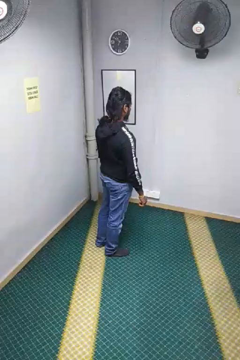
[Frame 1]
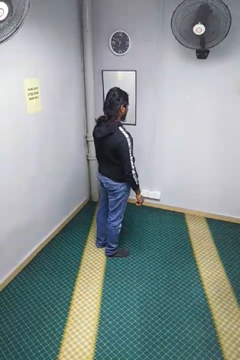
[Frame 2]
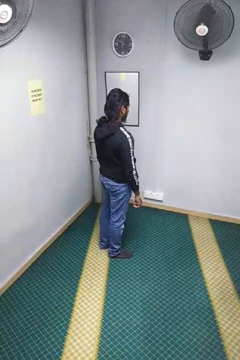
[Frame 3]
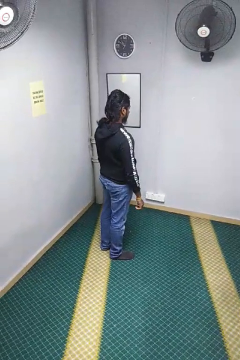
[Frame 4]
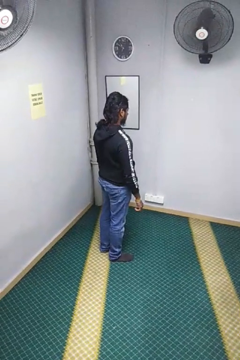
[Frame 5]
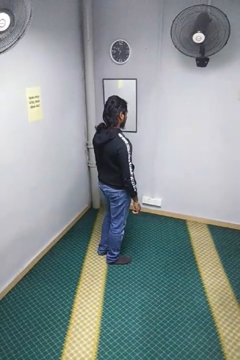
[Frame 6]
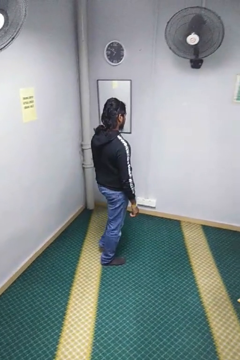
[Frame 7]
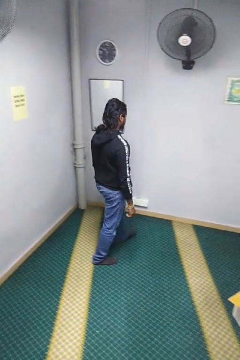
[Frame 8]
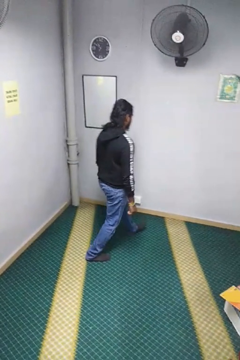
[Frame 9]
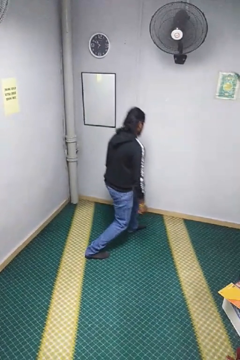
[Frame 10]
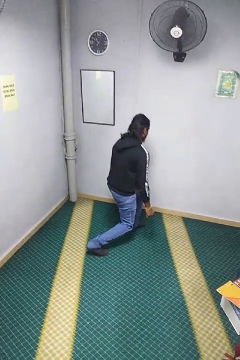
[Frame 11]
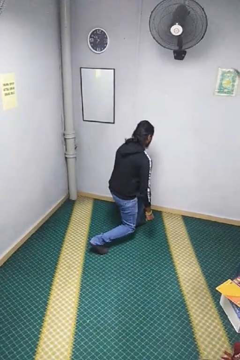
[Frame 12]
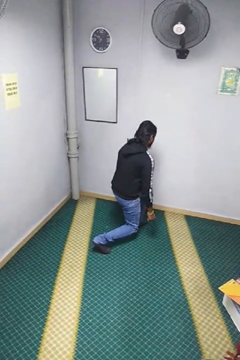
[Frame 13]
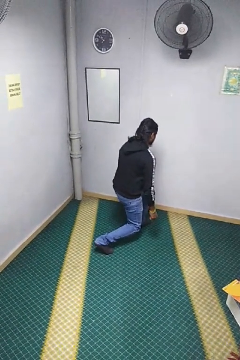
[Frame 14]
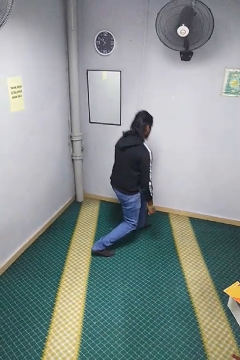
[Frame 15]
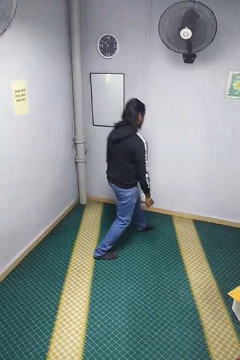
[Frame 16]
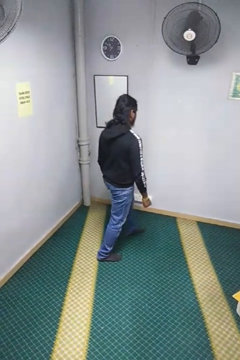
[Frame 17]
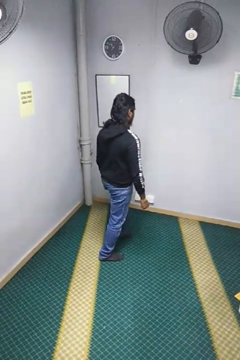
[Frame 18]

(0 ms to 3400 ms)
person exercises with lunges

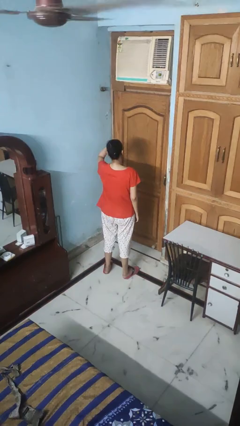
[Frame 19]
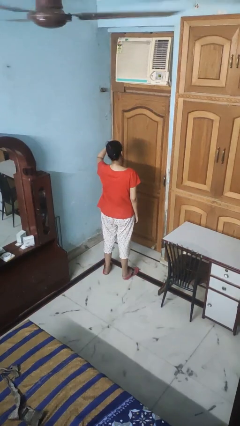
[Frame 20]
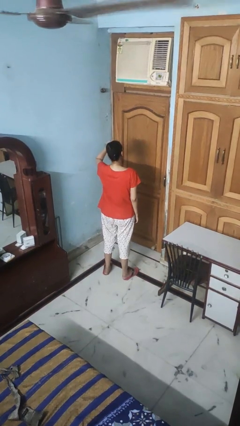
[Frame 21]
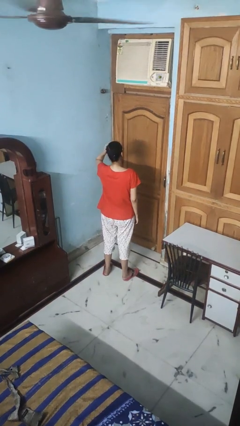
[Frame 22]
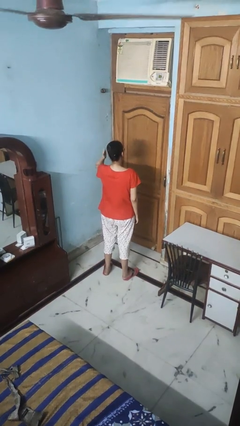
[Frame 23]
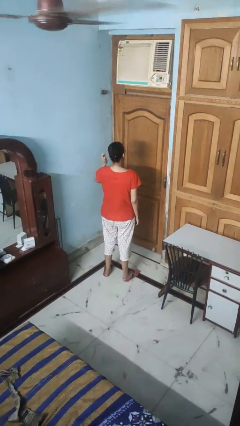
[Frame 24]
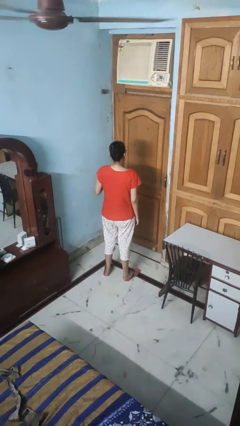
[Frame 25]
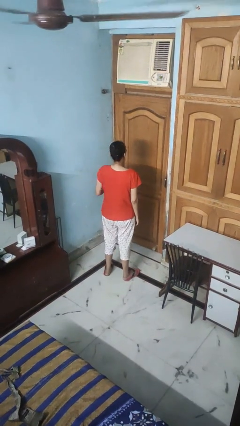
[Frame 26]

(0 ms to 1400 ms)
person strokes hair

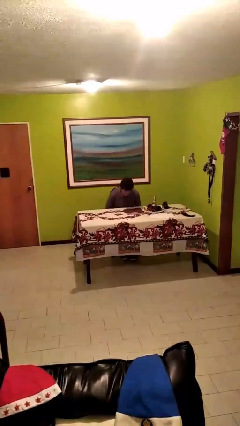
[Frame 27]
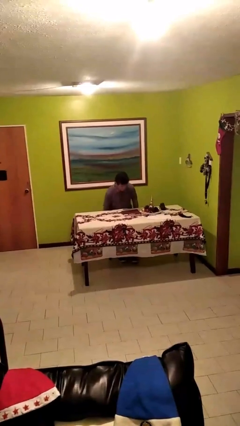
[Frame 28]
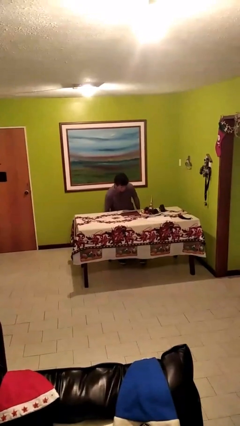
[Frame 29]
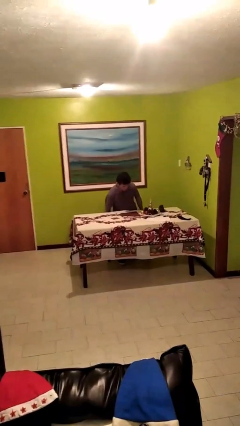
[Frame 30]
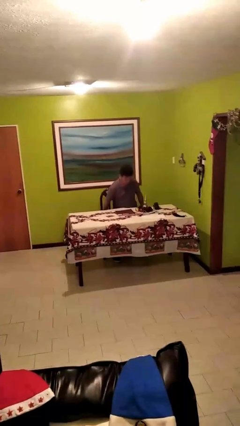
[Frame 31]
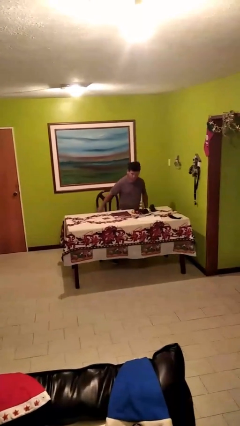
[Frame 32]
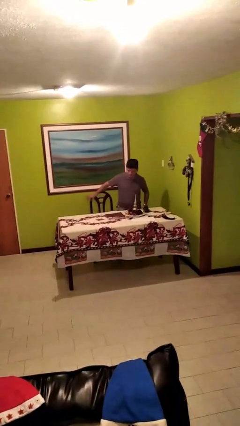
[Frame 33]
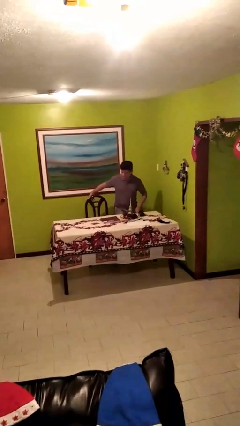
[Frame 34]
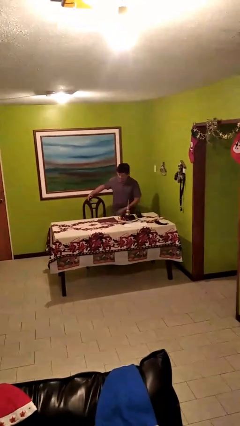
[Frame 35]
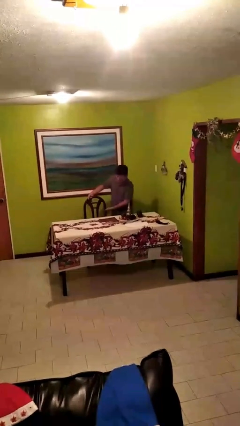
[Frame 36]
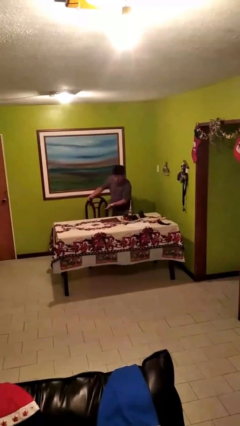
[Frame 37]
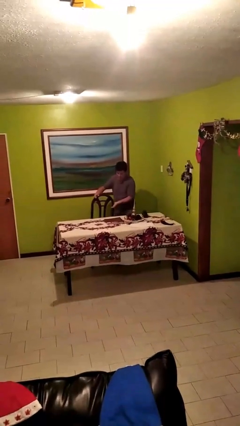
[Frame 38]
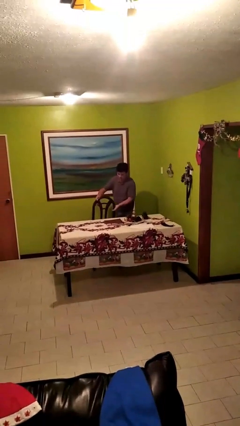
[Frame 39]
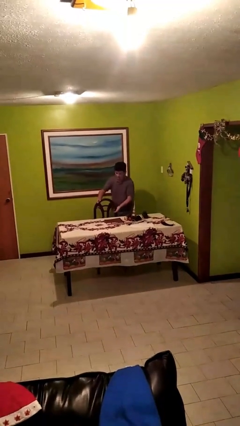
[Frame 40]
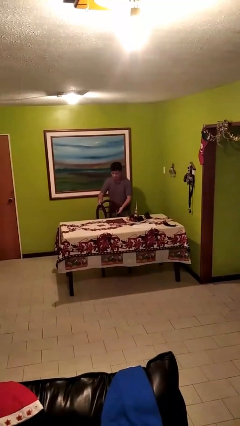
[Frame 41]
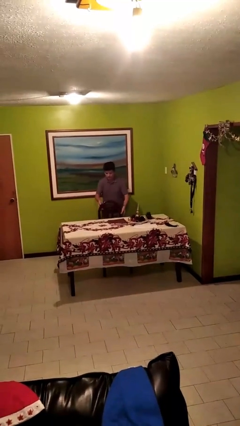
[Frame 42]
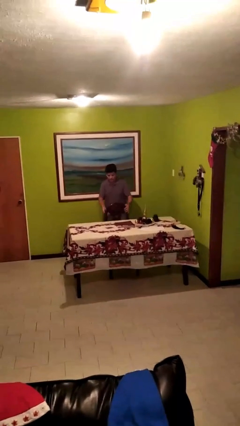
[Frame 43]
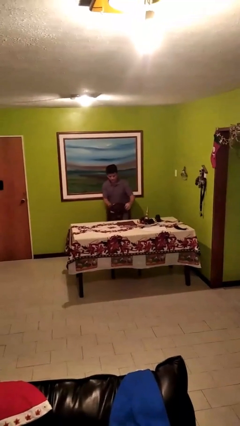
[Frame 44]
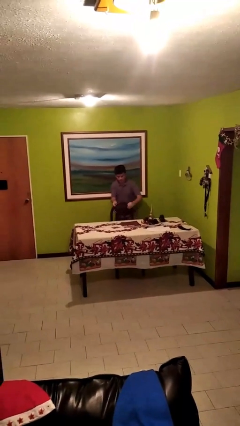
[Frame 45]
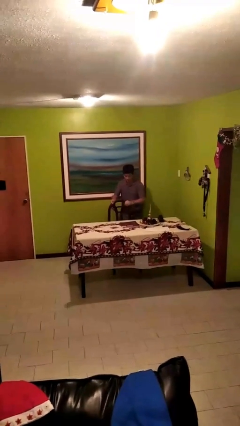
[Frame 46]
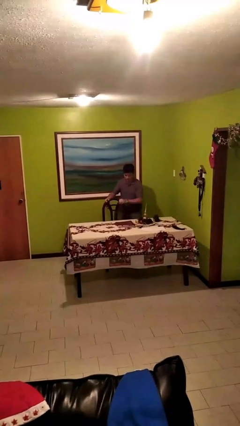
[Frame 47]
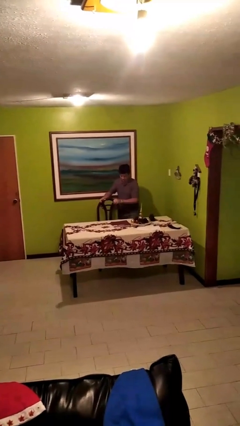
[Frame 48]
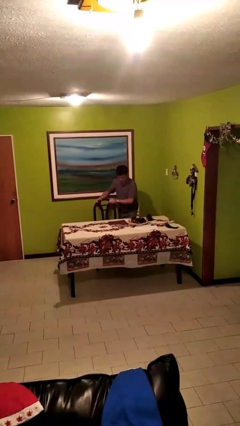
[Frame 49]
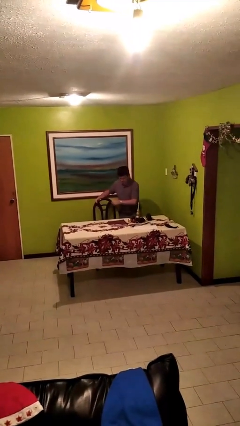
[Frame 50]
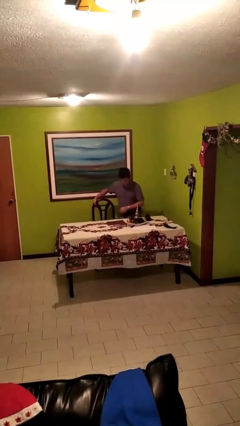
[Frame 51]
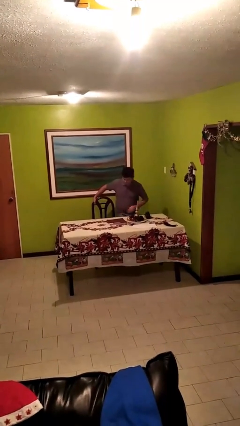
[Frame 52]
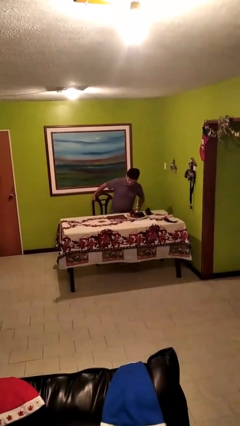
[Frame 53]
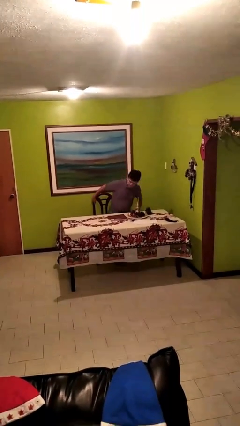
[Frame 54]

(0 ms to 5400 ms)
person stands up

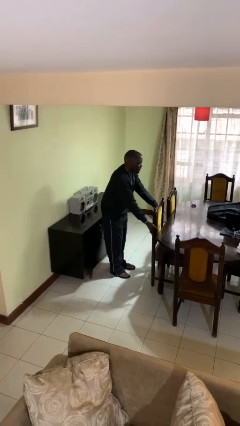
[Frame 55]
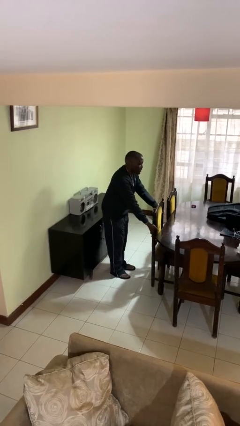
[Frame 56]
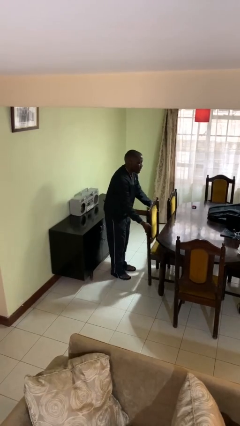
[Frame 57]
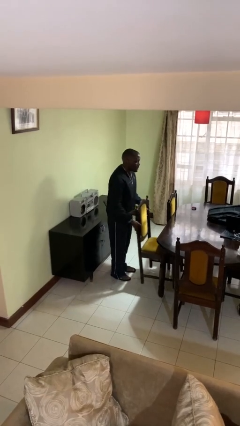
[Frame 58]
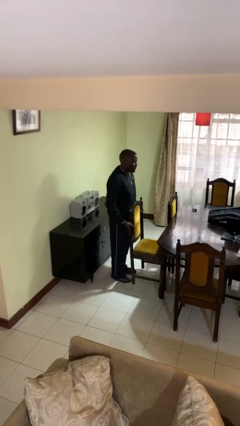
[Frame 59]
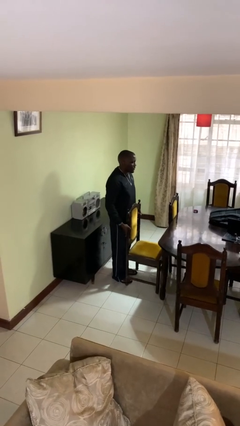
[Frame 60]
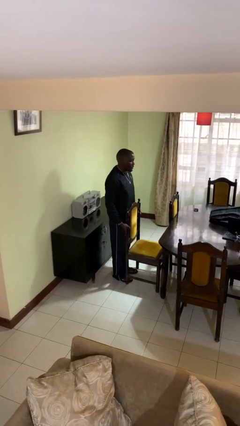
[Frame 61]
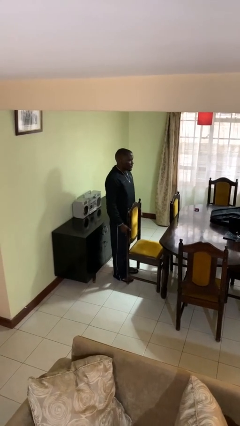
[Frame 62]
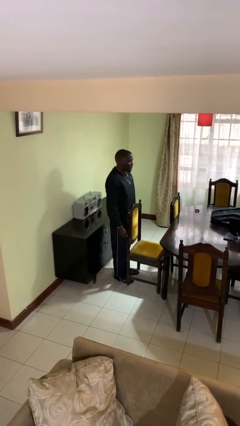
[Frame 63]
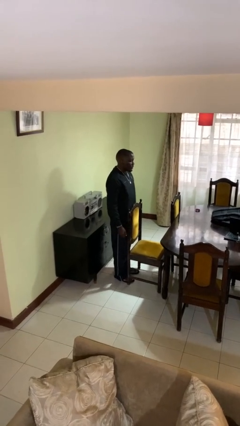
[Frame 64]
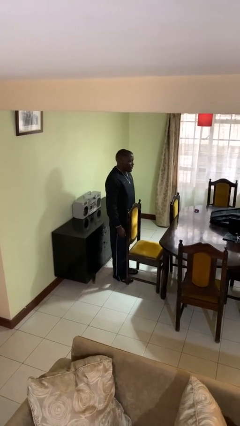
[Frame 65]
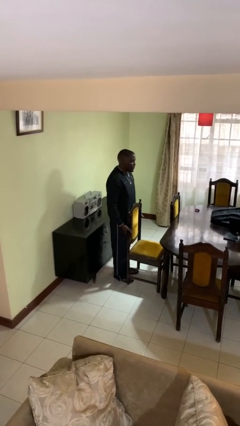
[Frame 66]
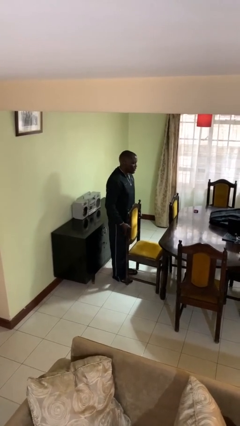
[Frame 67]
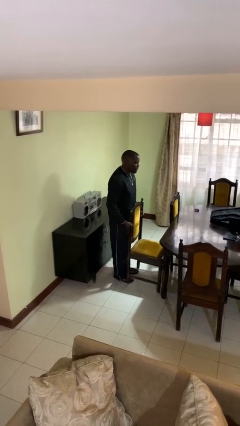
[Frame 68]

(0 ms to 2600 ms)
person pulls out chair

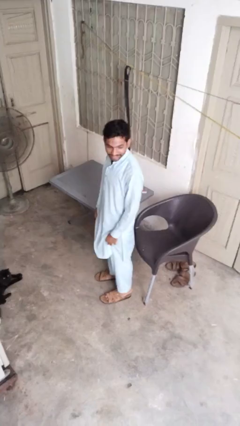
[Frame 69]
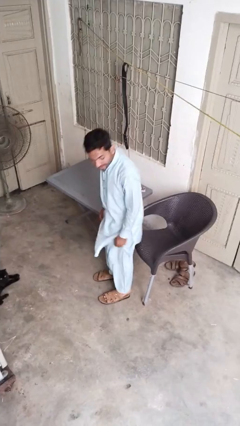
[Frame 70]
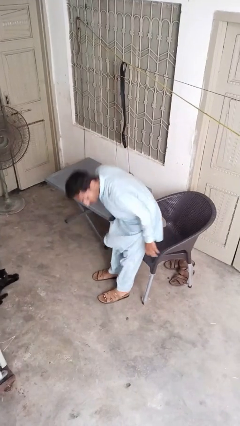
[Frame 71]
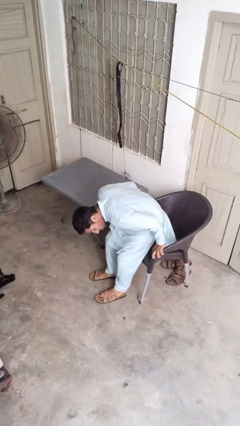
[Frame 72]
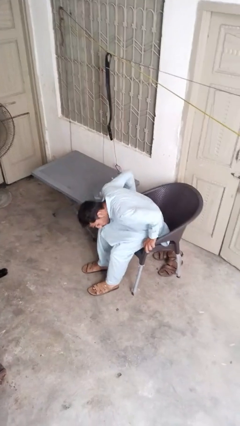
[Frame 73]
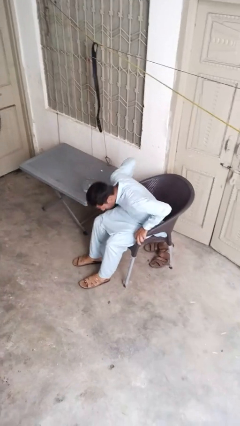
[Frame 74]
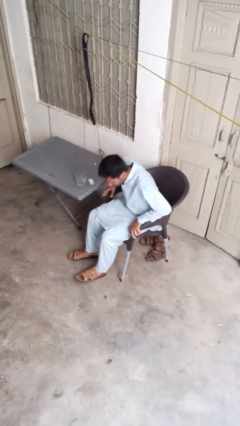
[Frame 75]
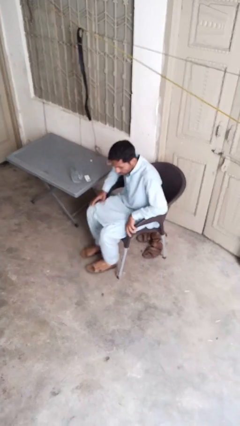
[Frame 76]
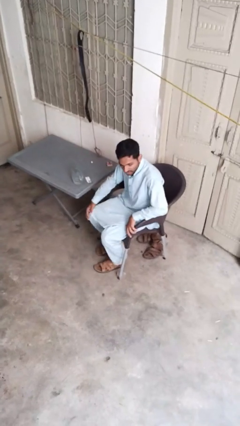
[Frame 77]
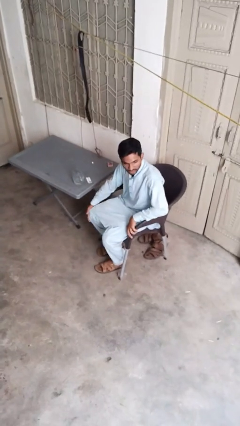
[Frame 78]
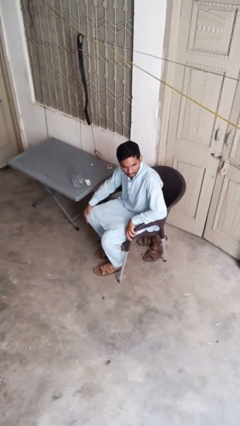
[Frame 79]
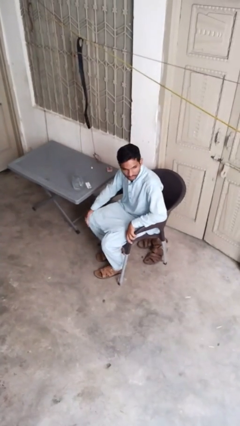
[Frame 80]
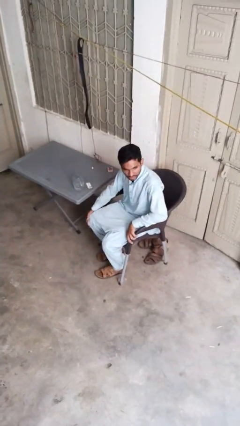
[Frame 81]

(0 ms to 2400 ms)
person sits down

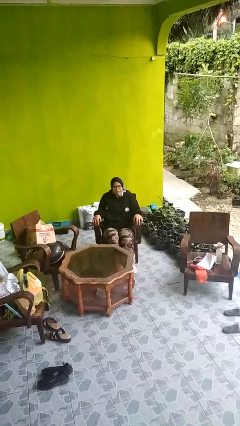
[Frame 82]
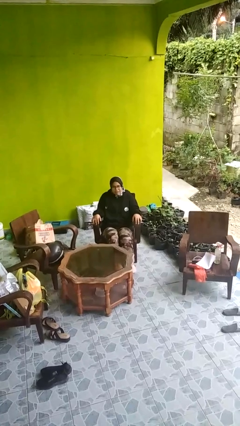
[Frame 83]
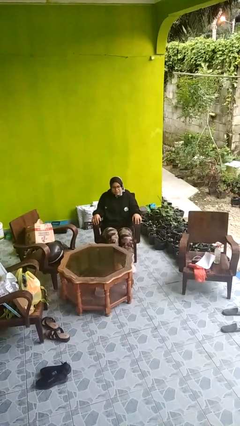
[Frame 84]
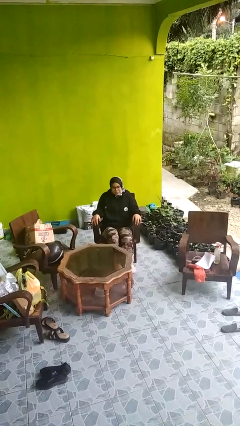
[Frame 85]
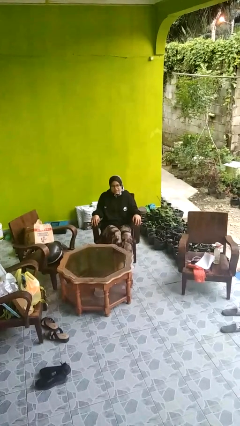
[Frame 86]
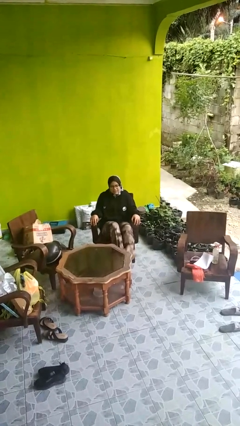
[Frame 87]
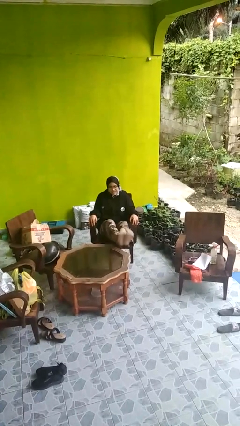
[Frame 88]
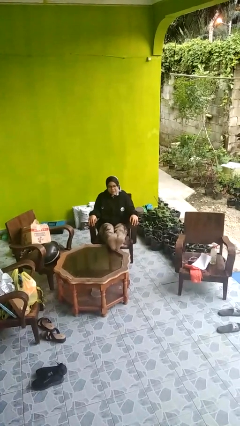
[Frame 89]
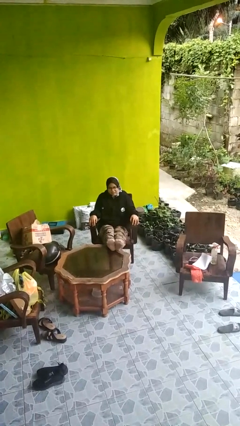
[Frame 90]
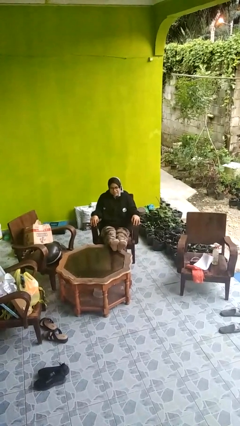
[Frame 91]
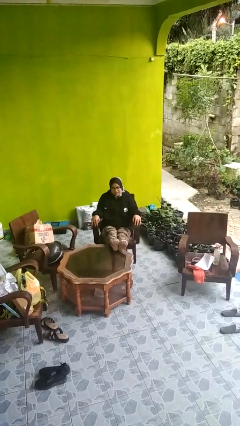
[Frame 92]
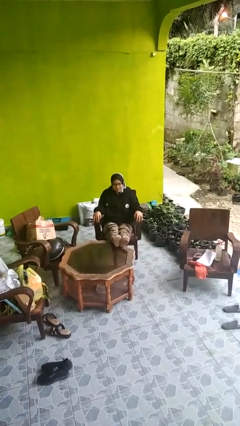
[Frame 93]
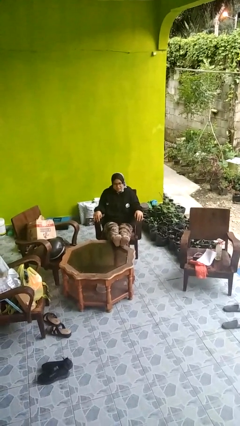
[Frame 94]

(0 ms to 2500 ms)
person puts feet up

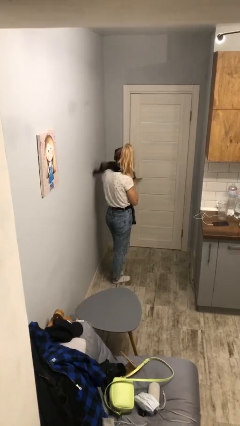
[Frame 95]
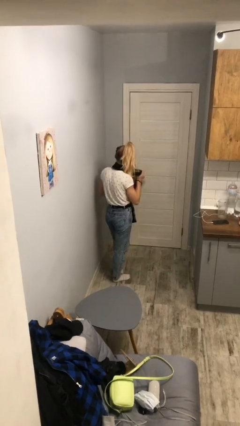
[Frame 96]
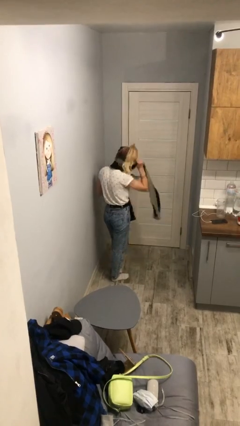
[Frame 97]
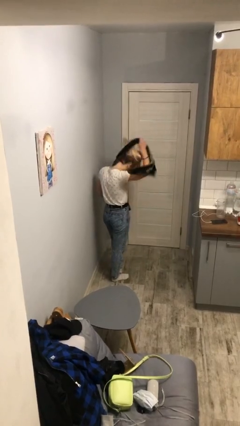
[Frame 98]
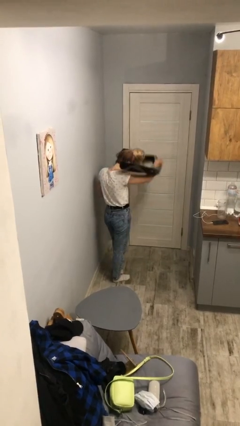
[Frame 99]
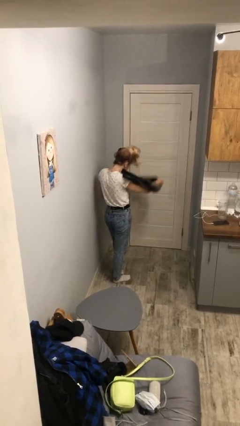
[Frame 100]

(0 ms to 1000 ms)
person takes off scarf
